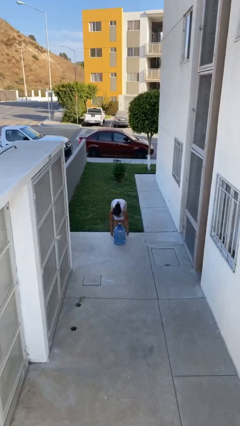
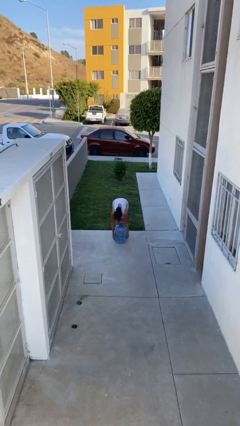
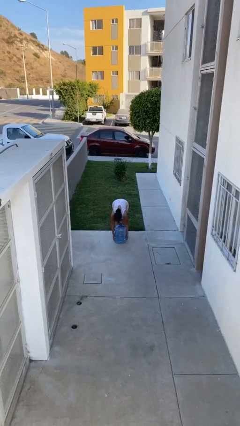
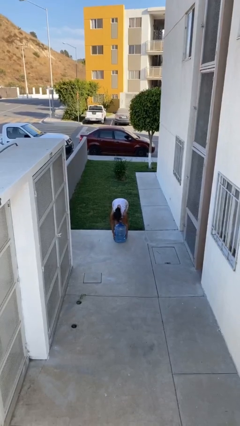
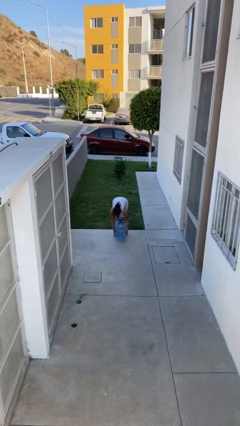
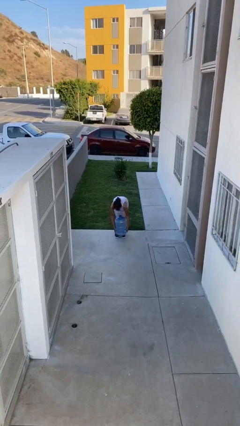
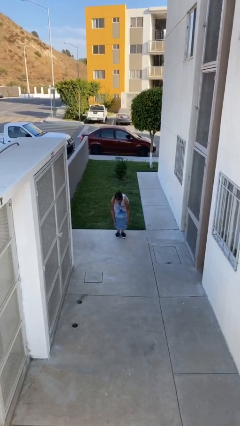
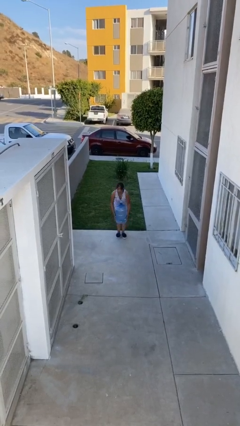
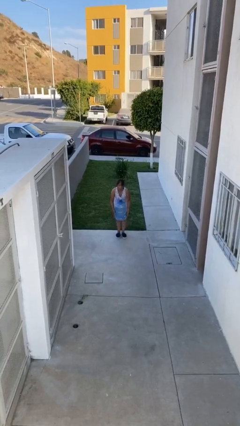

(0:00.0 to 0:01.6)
person picks up object from floor

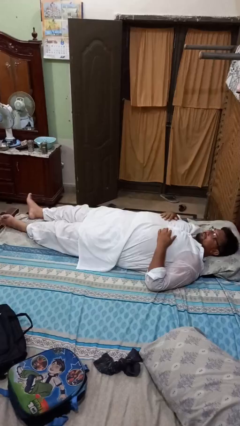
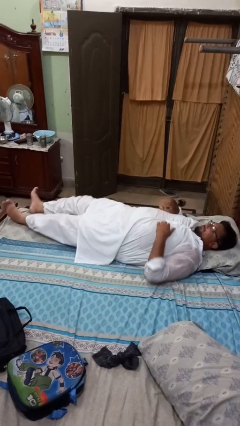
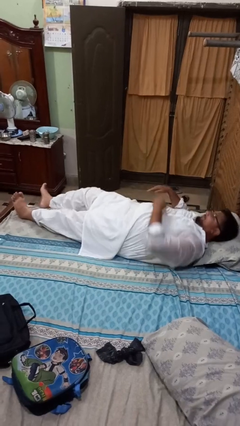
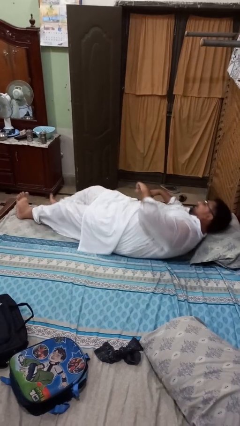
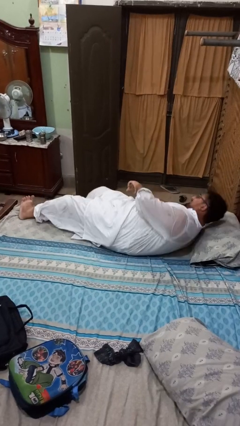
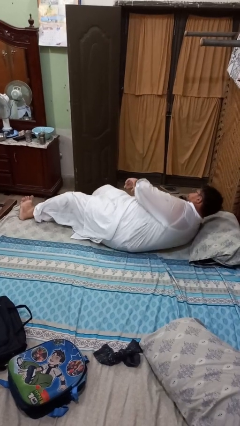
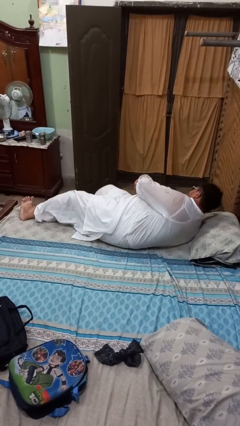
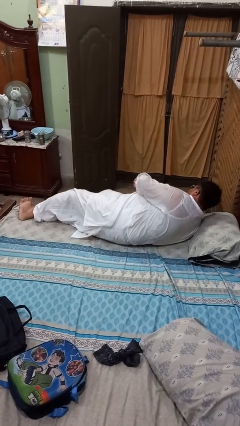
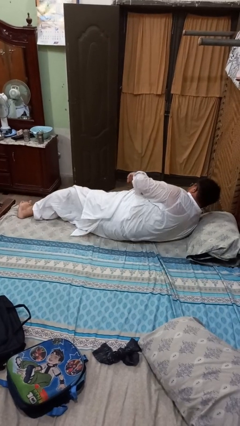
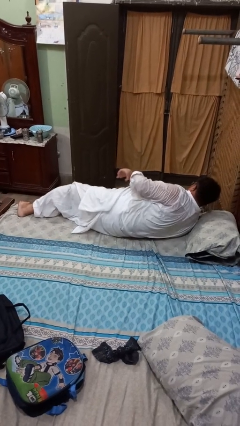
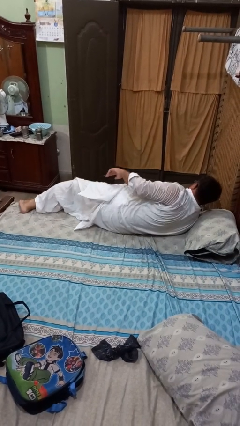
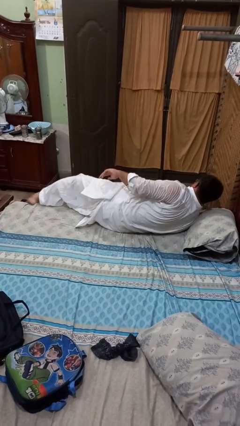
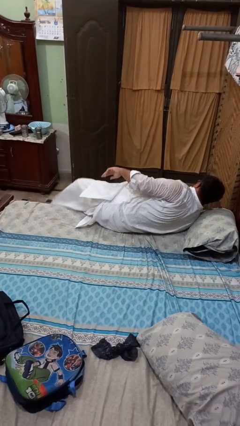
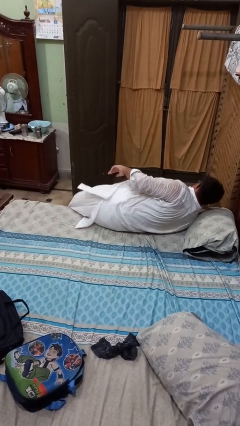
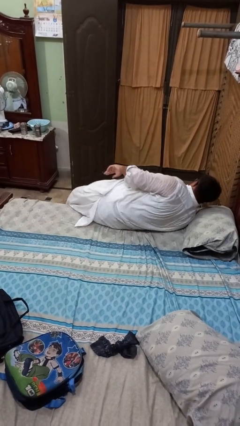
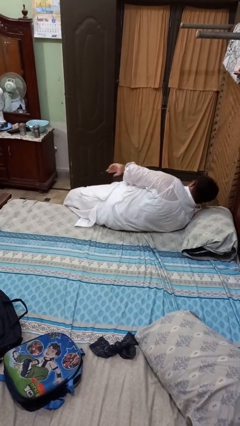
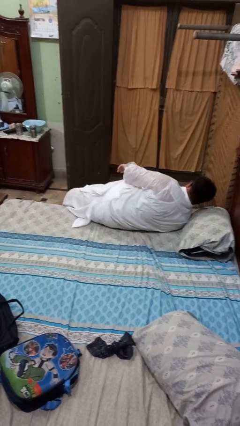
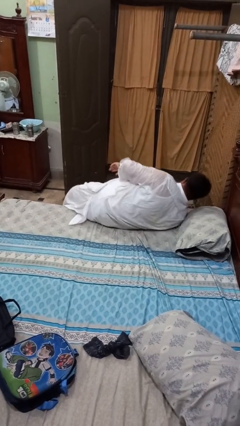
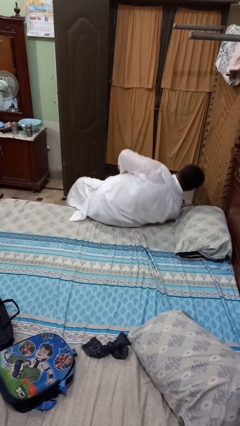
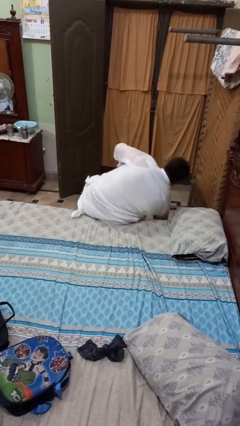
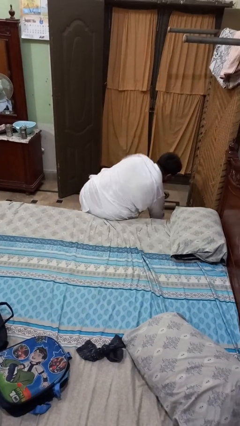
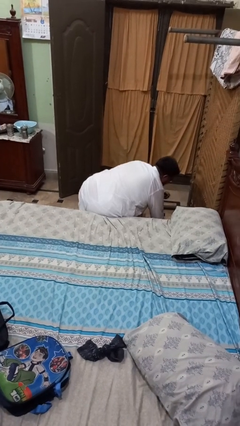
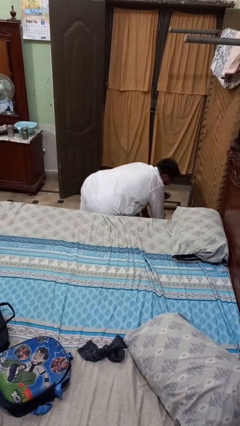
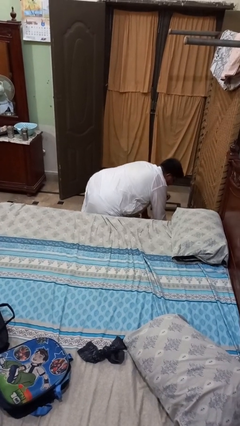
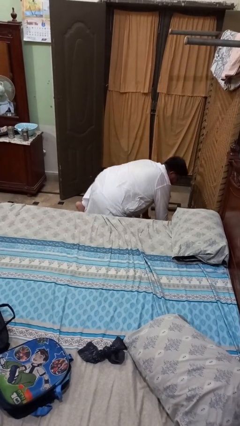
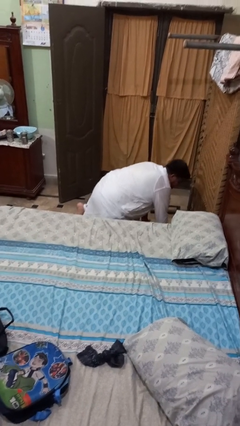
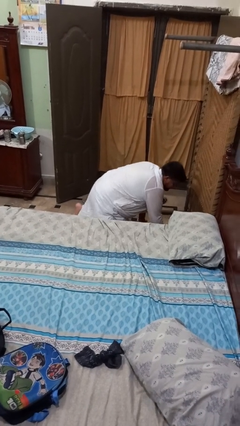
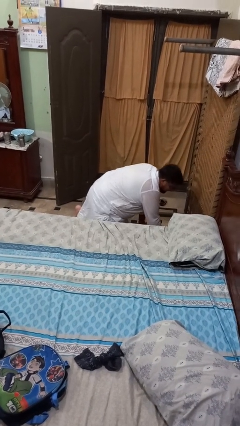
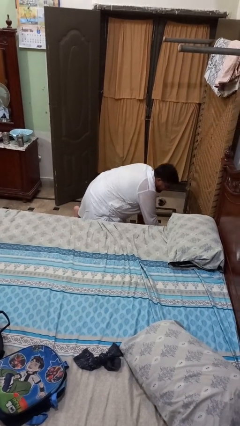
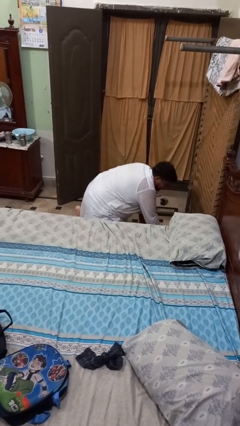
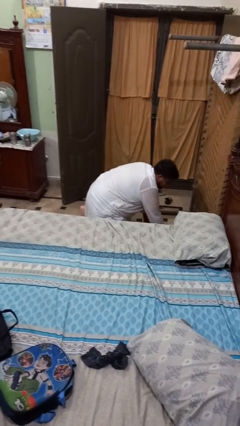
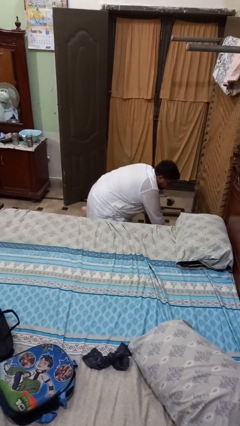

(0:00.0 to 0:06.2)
person falls from bed

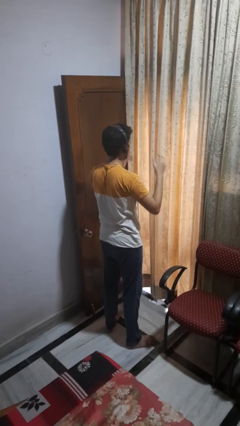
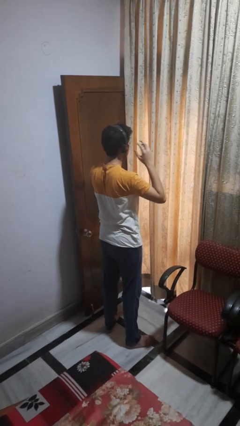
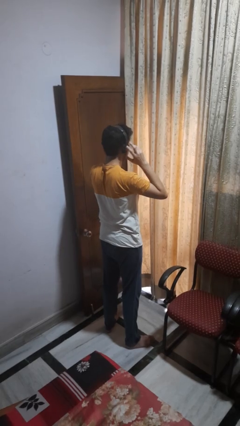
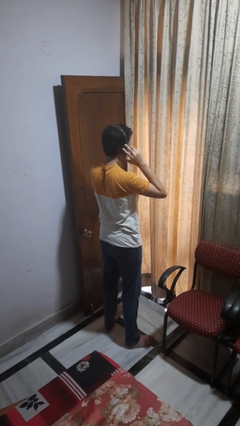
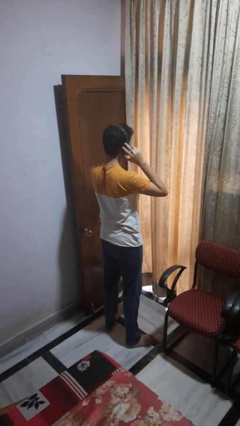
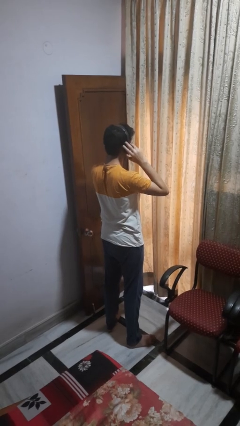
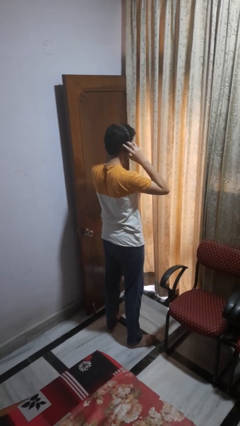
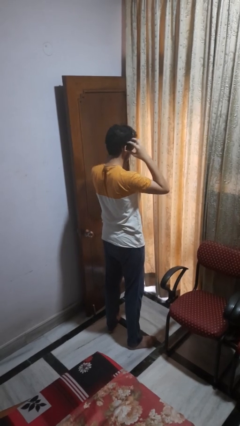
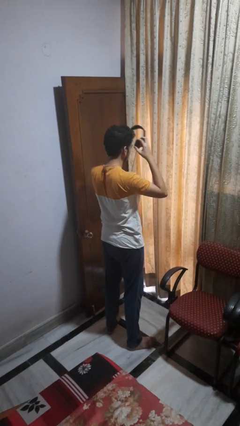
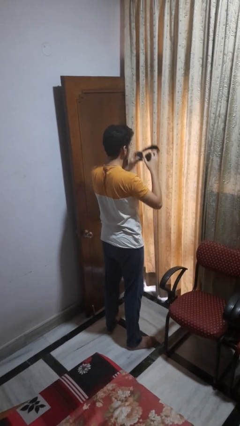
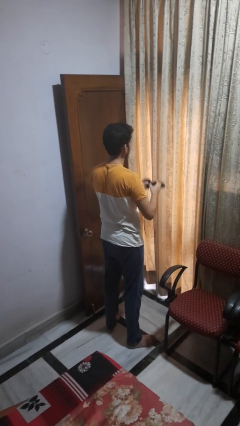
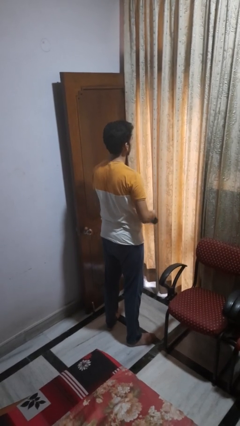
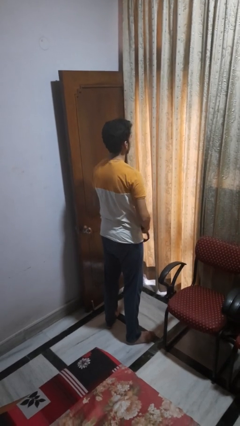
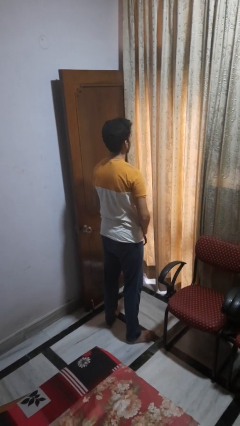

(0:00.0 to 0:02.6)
person takes off headphones

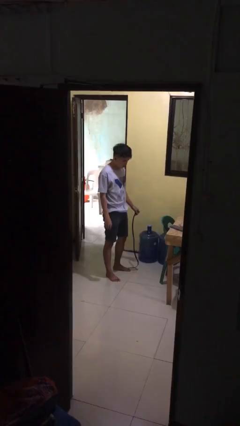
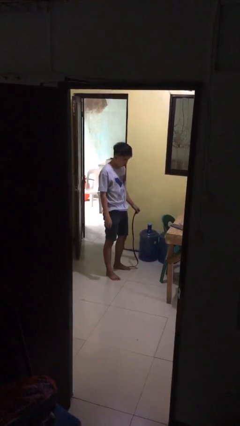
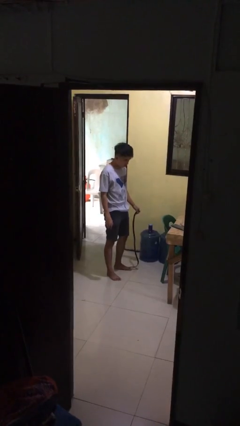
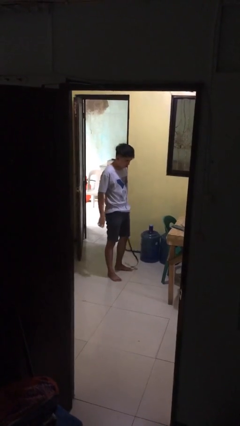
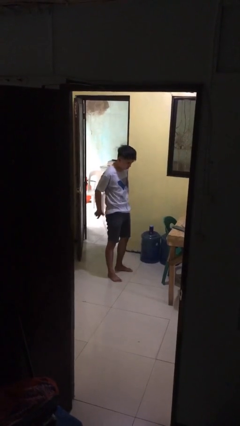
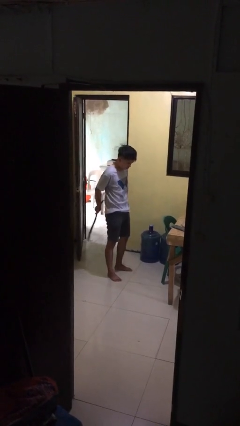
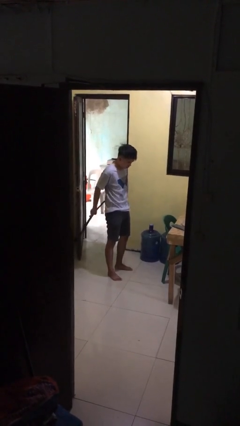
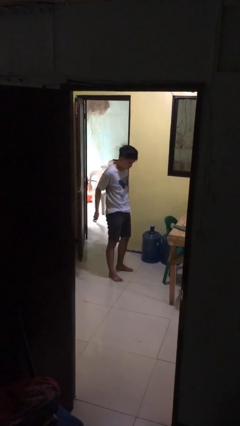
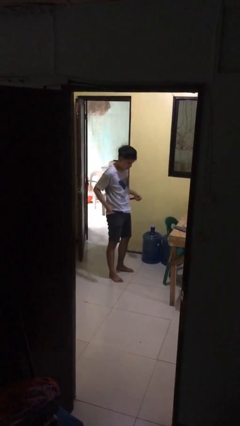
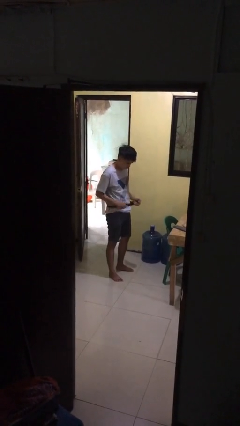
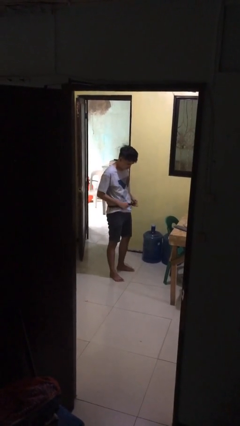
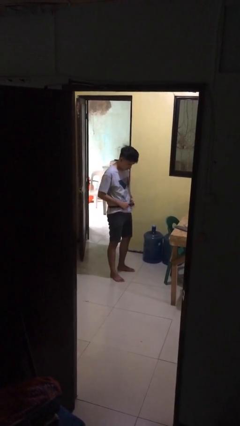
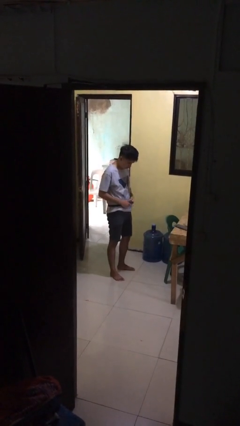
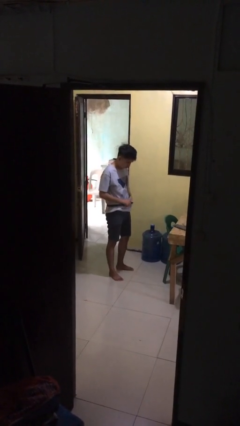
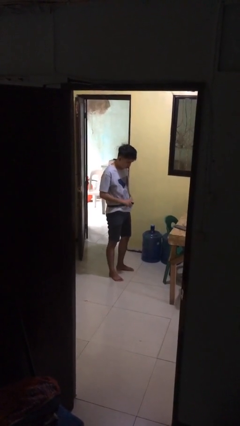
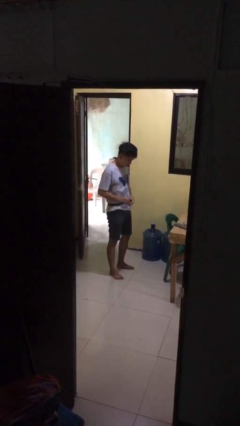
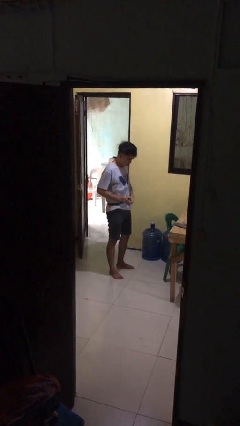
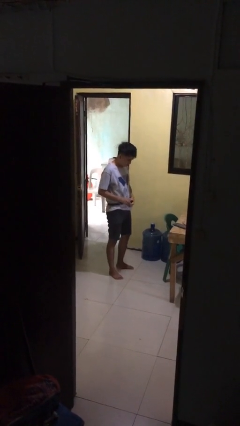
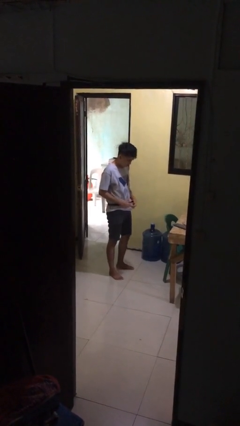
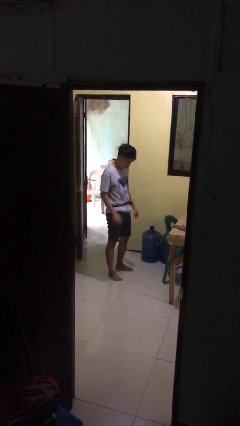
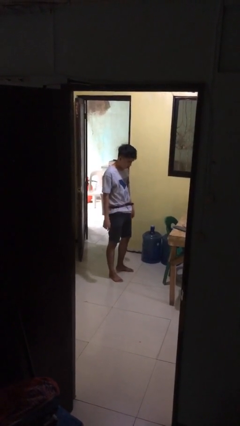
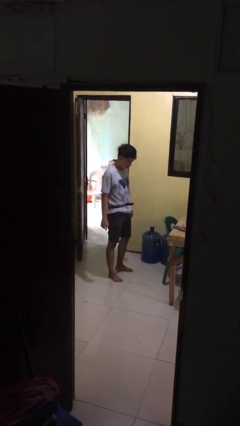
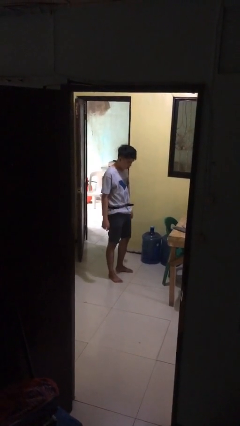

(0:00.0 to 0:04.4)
person puts on belt

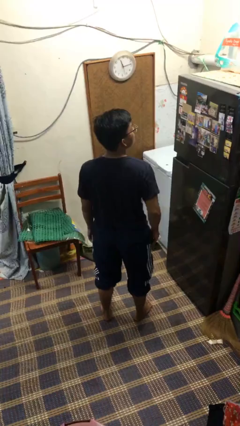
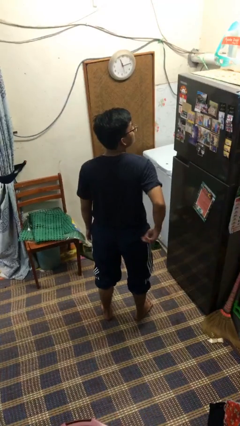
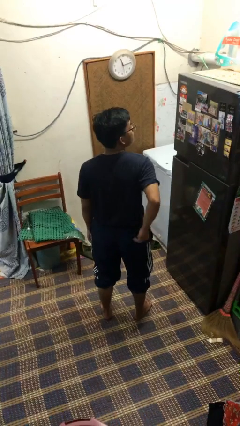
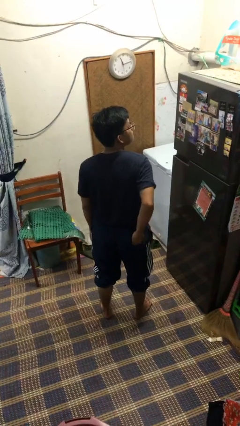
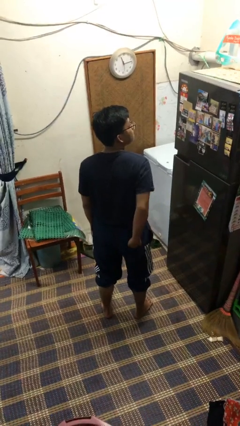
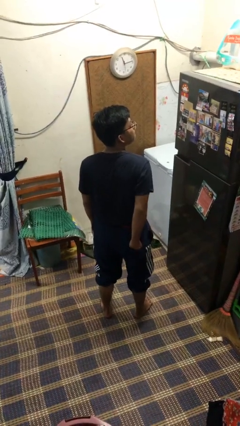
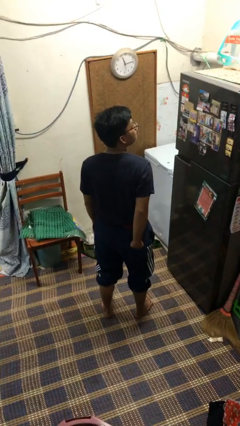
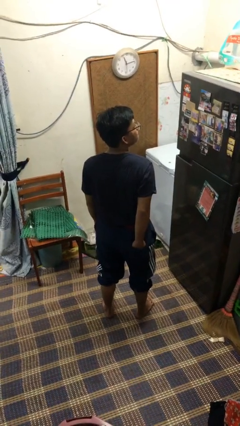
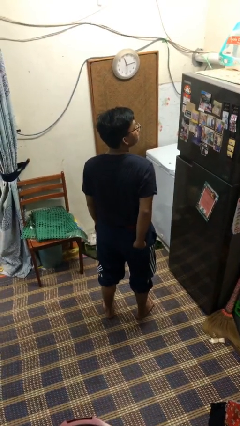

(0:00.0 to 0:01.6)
person puts hands in back pockets

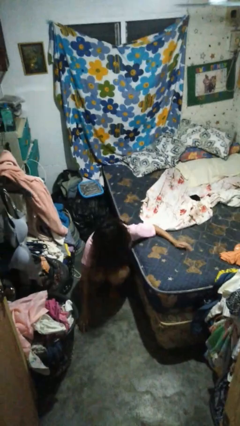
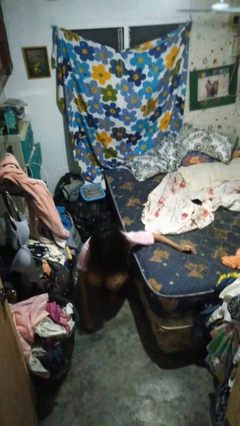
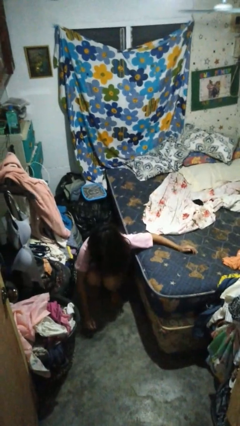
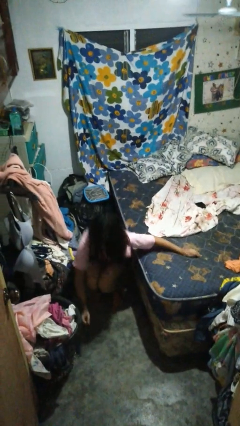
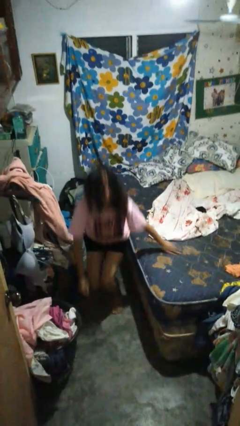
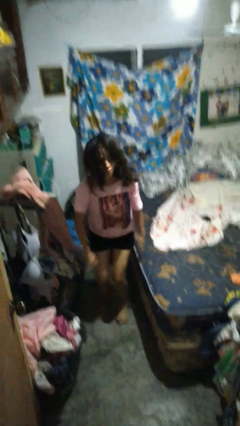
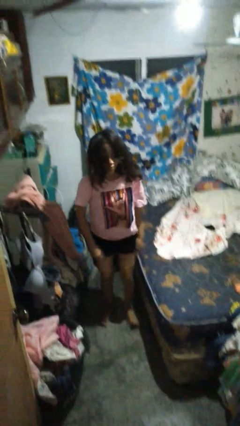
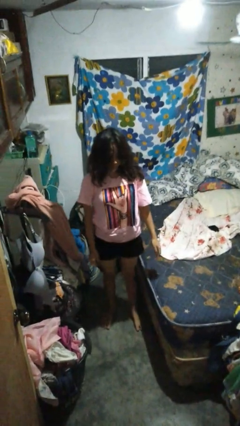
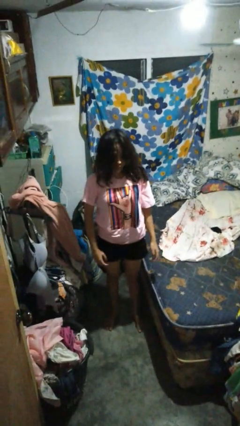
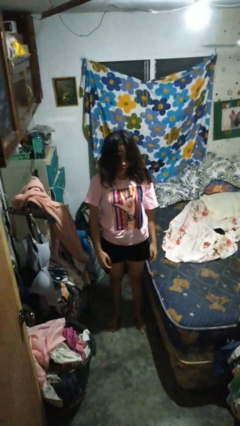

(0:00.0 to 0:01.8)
person stands up from floor
